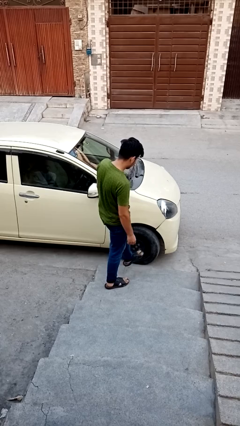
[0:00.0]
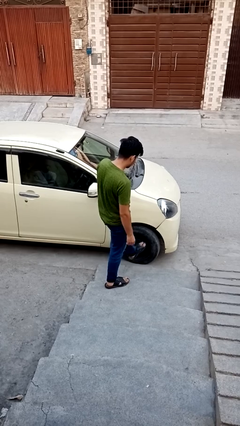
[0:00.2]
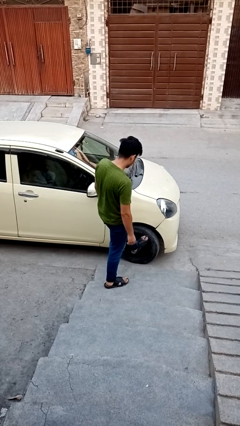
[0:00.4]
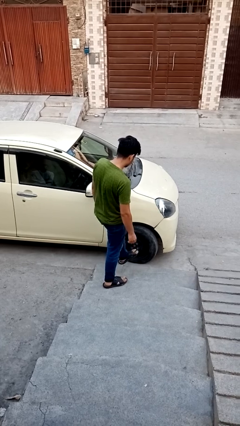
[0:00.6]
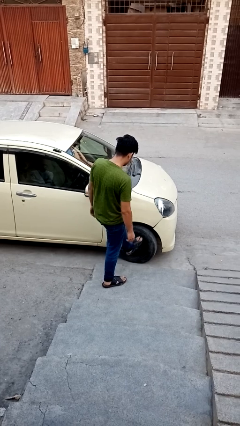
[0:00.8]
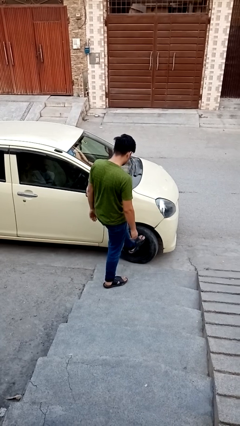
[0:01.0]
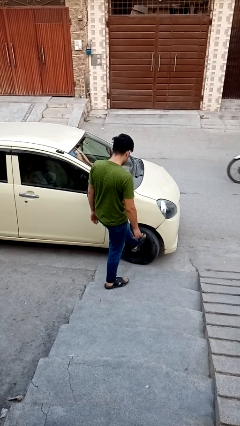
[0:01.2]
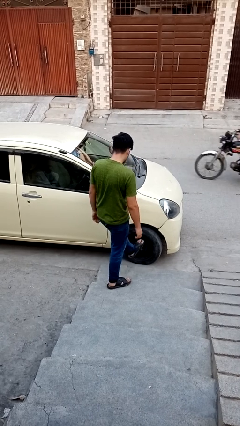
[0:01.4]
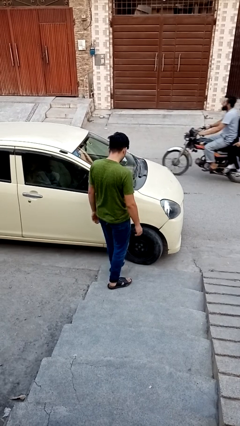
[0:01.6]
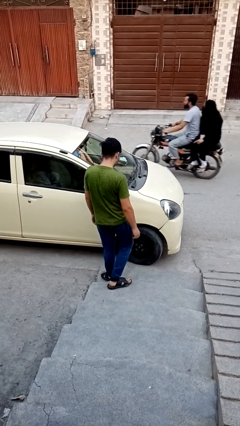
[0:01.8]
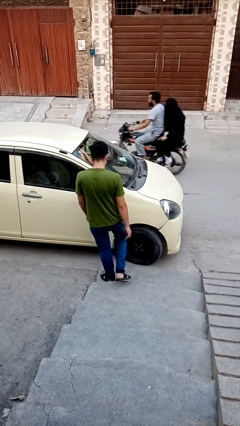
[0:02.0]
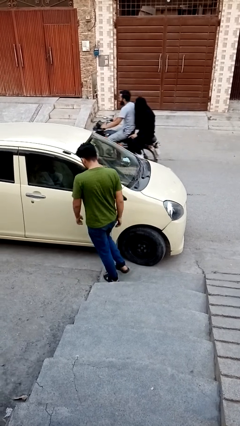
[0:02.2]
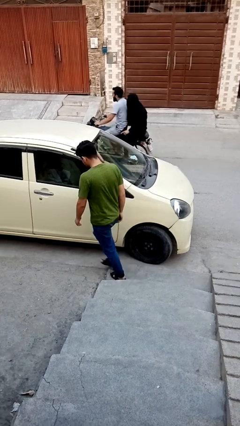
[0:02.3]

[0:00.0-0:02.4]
person kicks car tires

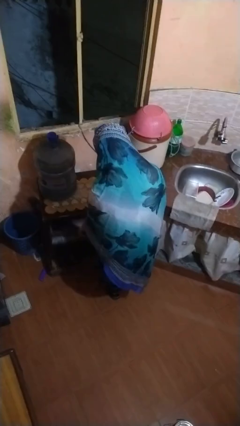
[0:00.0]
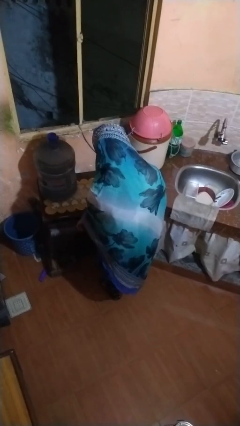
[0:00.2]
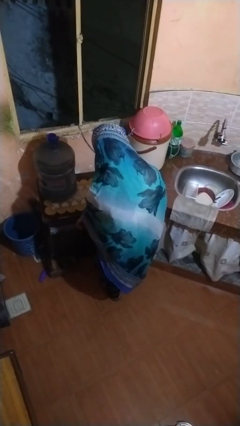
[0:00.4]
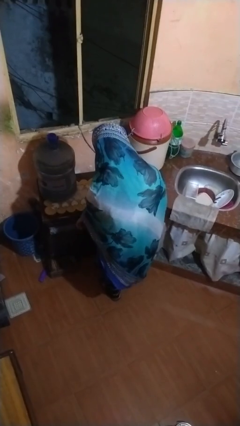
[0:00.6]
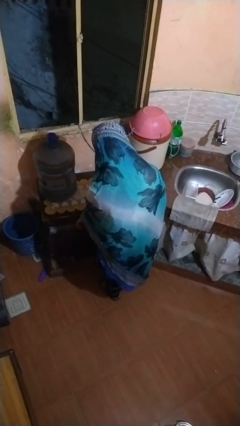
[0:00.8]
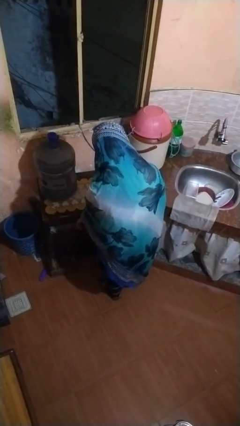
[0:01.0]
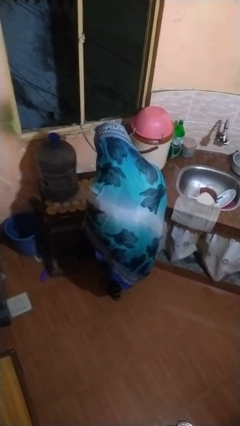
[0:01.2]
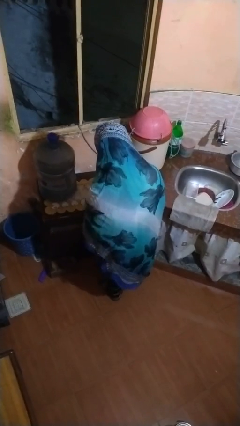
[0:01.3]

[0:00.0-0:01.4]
person closes kitchen drawer

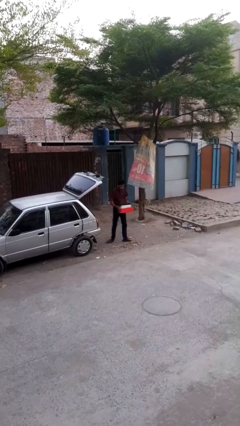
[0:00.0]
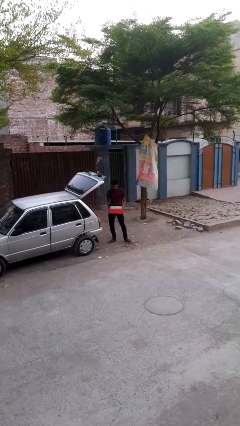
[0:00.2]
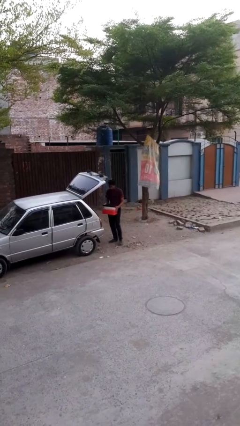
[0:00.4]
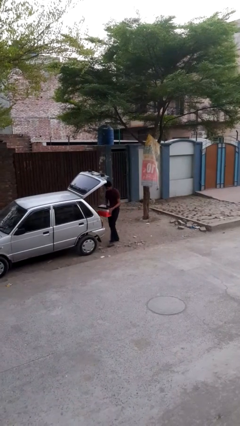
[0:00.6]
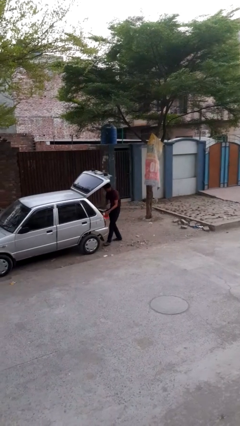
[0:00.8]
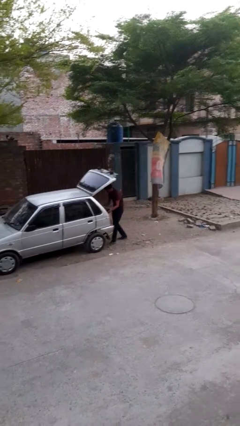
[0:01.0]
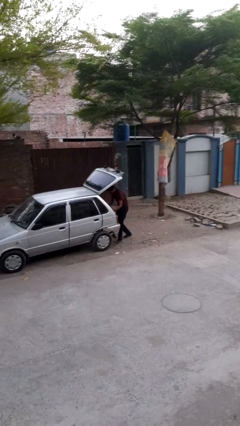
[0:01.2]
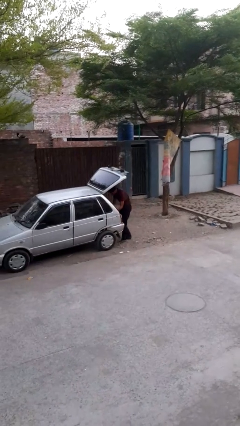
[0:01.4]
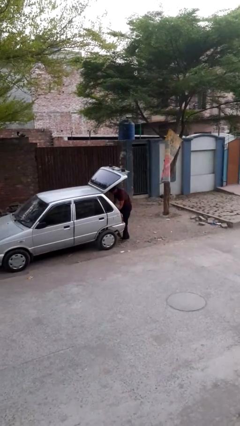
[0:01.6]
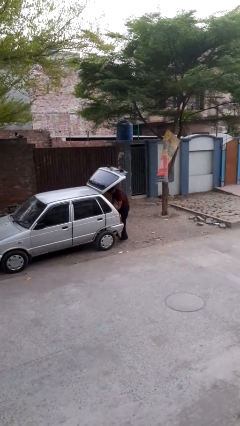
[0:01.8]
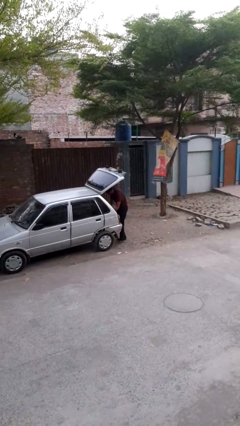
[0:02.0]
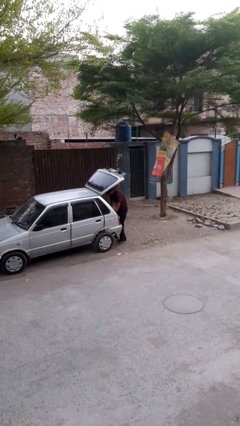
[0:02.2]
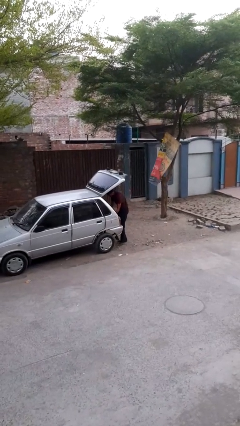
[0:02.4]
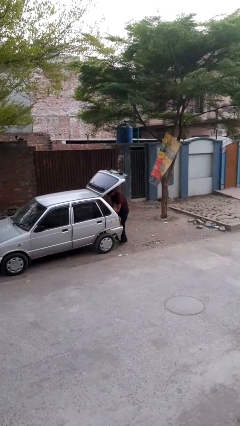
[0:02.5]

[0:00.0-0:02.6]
person loads car

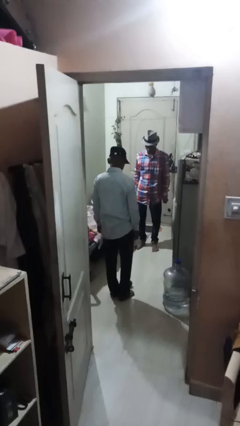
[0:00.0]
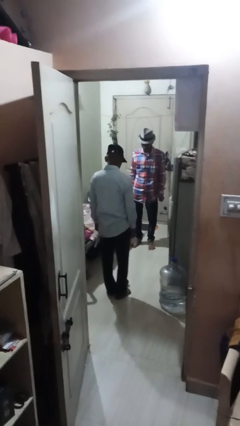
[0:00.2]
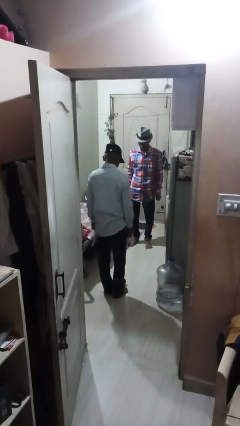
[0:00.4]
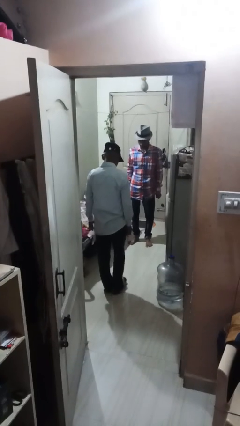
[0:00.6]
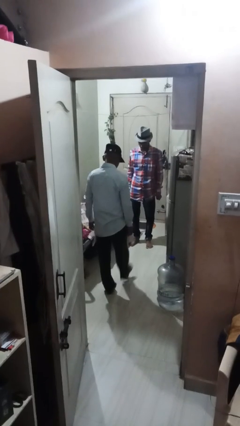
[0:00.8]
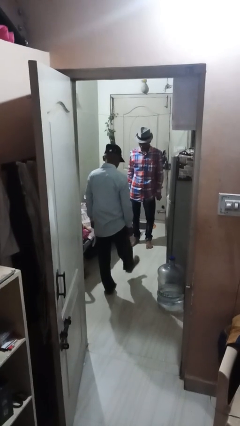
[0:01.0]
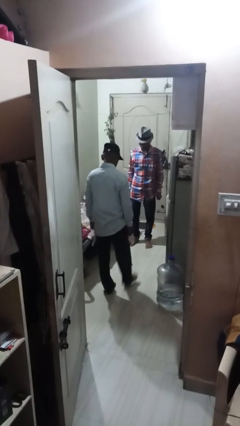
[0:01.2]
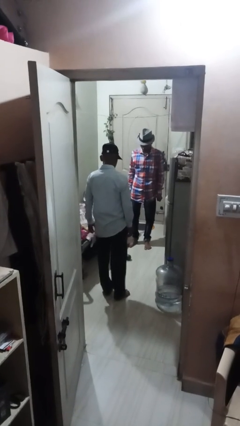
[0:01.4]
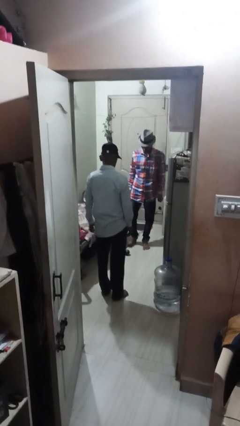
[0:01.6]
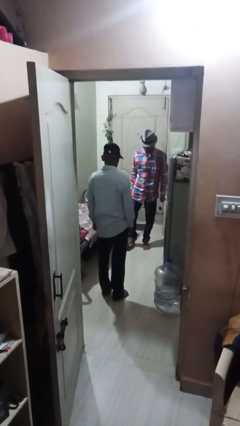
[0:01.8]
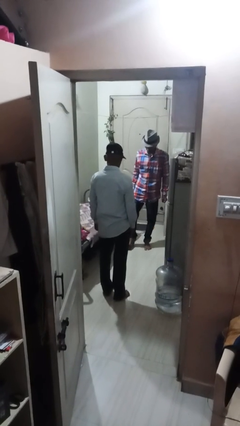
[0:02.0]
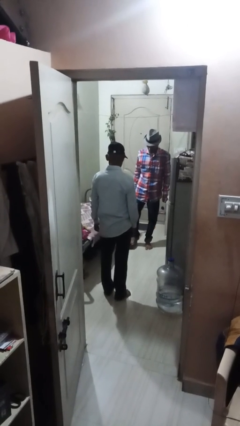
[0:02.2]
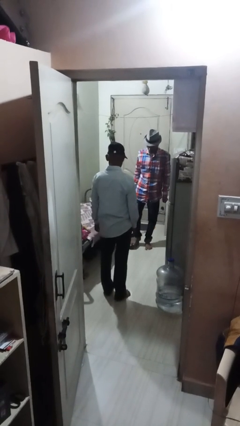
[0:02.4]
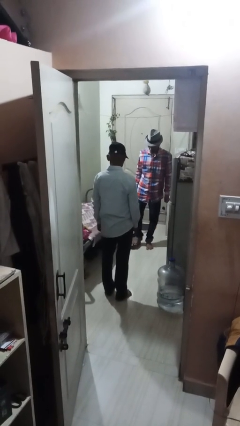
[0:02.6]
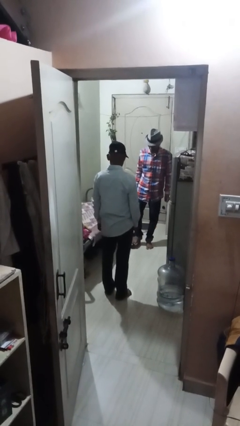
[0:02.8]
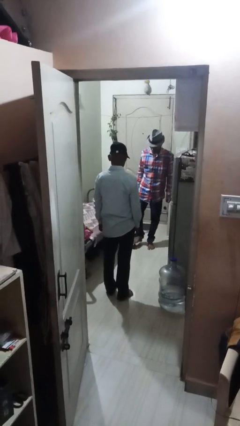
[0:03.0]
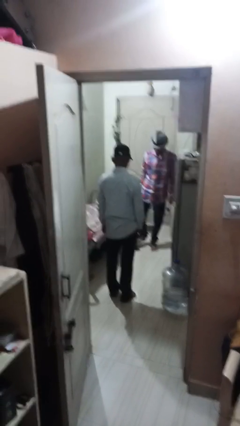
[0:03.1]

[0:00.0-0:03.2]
person kicks object to person

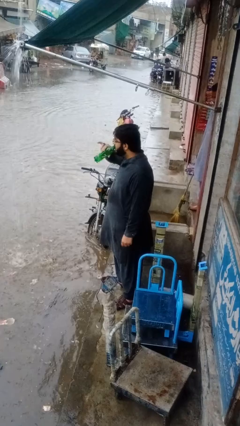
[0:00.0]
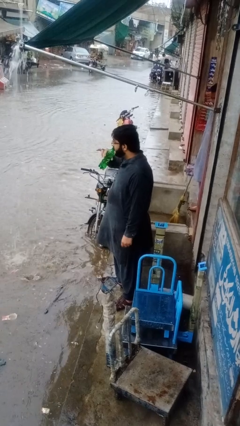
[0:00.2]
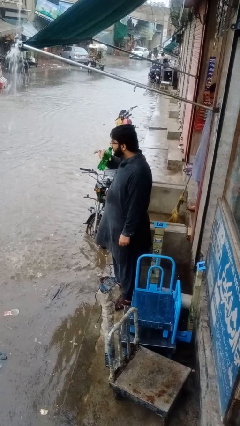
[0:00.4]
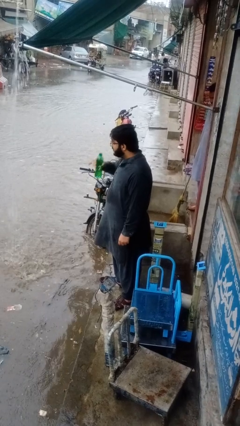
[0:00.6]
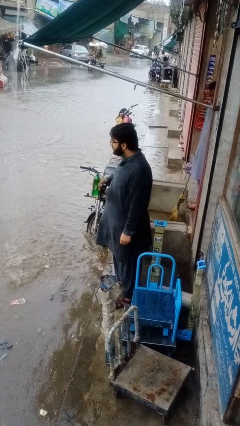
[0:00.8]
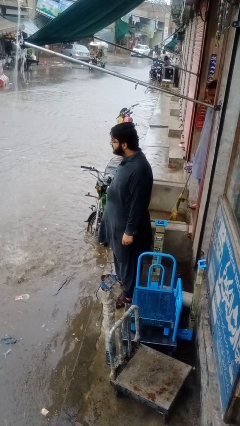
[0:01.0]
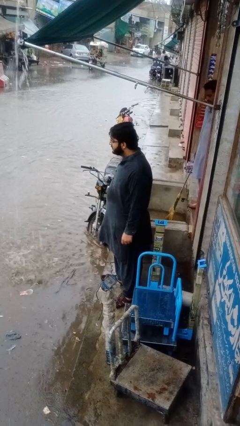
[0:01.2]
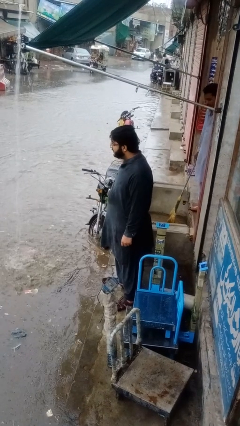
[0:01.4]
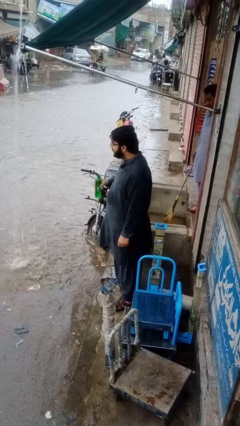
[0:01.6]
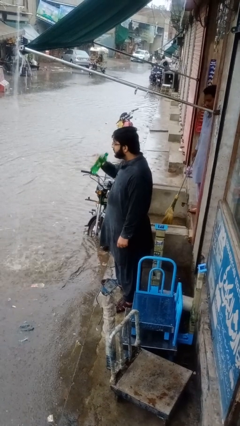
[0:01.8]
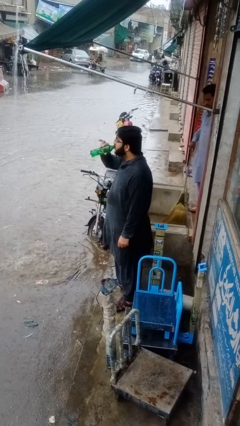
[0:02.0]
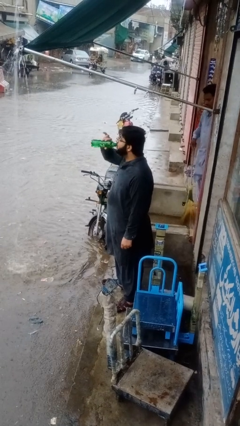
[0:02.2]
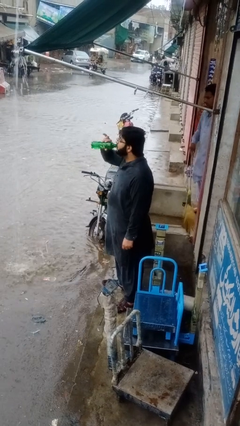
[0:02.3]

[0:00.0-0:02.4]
person drinks from bottle

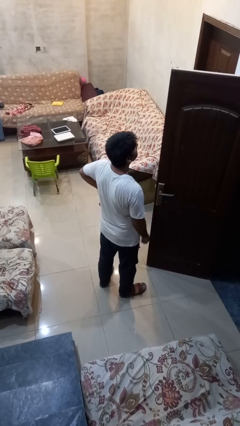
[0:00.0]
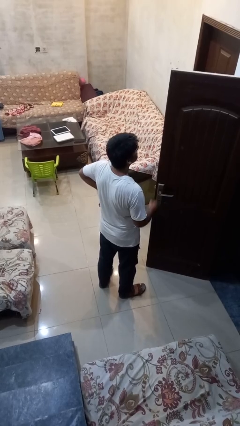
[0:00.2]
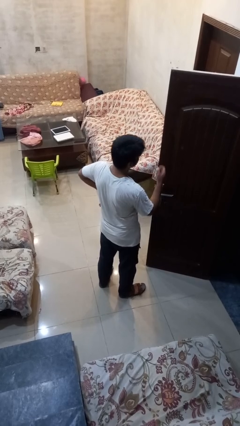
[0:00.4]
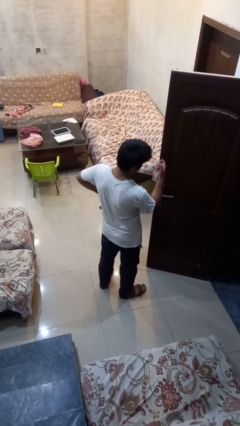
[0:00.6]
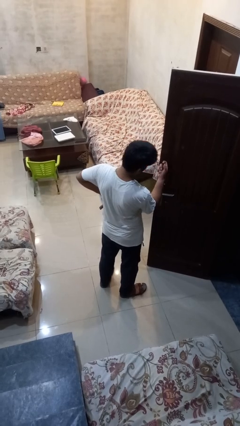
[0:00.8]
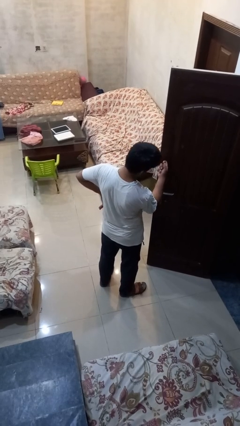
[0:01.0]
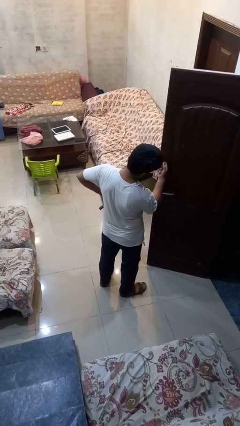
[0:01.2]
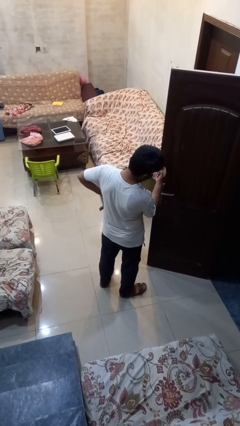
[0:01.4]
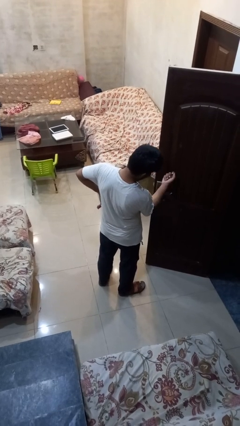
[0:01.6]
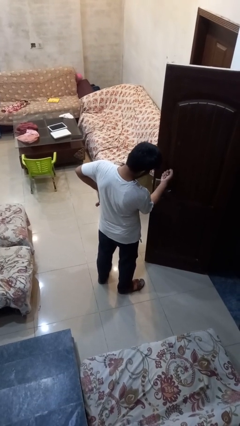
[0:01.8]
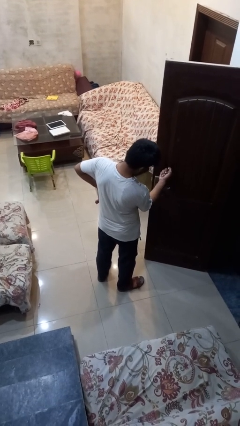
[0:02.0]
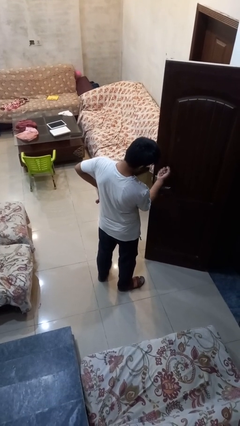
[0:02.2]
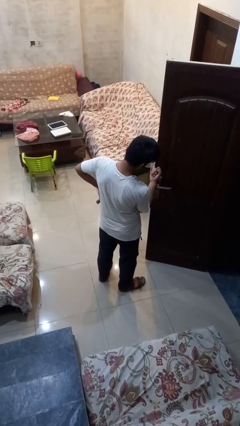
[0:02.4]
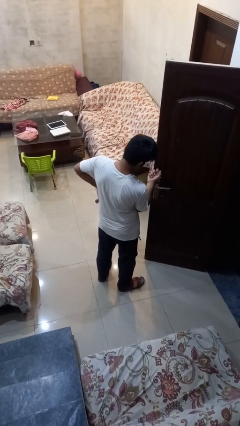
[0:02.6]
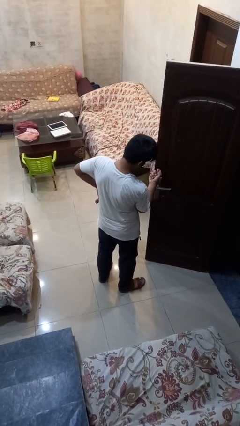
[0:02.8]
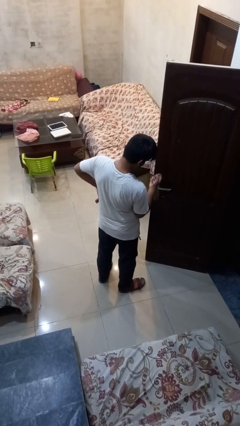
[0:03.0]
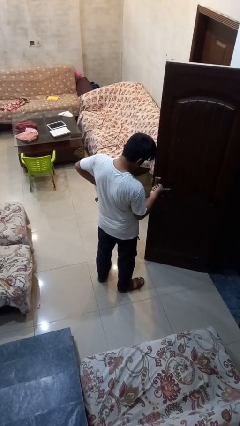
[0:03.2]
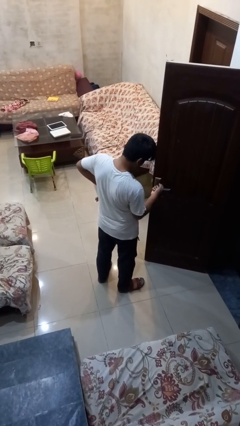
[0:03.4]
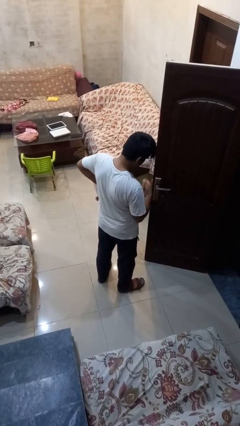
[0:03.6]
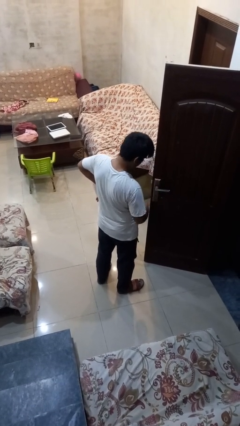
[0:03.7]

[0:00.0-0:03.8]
person taps object with finger

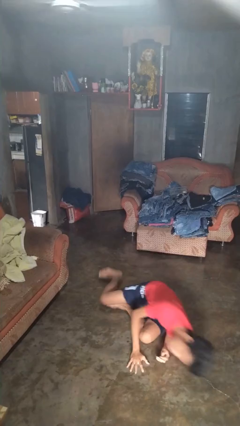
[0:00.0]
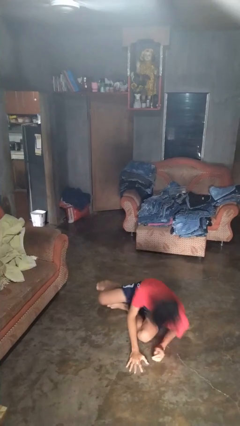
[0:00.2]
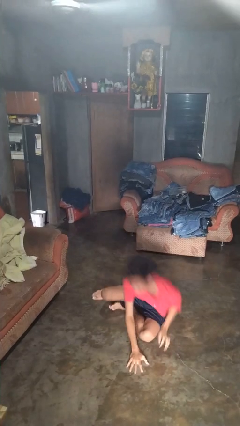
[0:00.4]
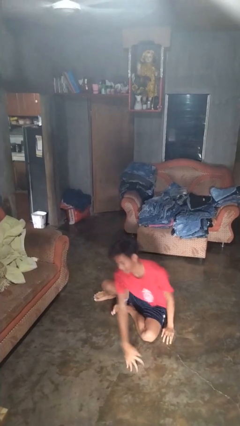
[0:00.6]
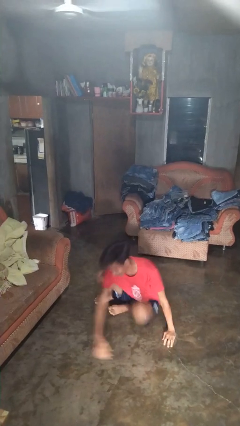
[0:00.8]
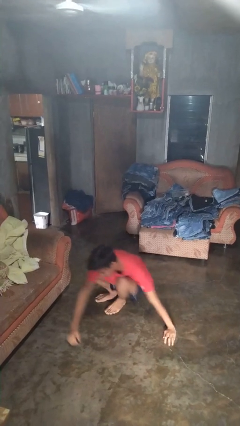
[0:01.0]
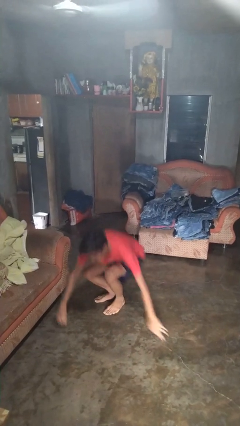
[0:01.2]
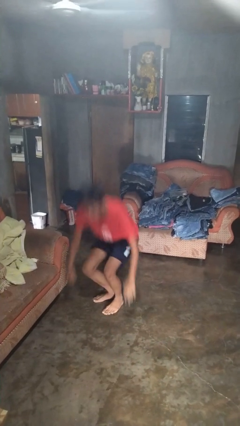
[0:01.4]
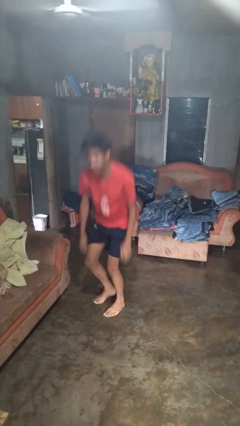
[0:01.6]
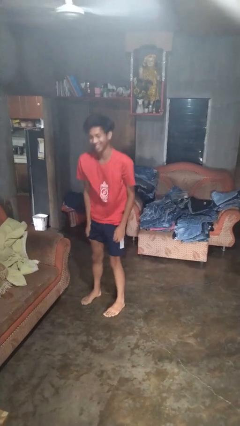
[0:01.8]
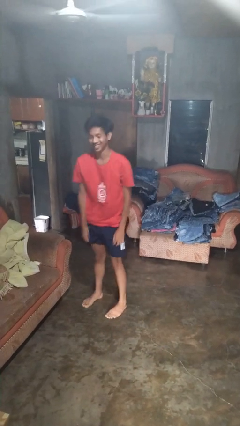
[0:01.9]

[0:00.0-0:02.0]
person stands up from floor
